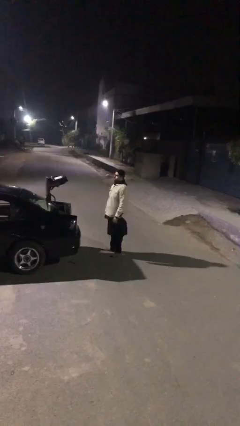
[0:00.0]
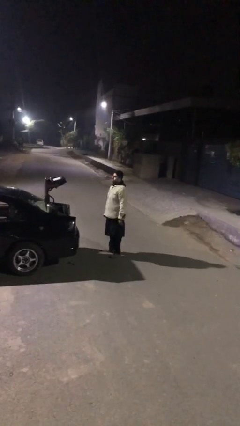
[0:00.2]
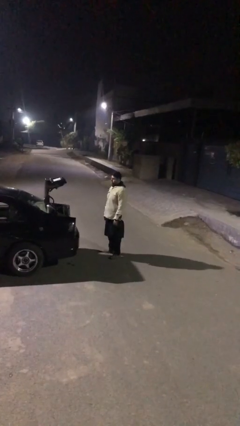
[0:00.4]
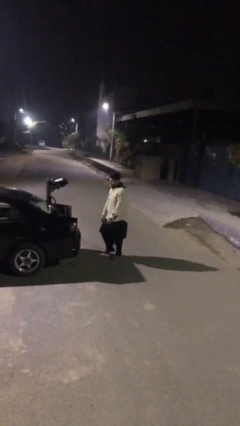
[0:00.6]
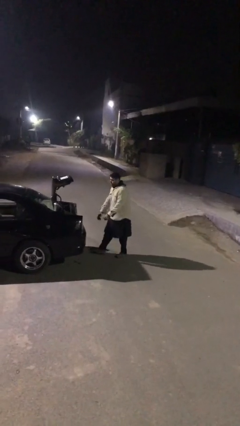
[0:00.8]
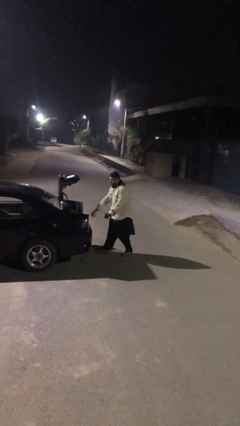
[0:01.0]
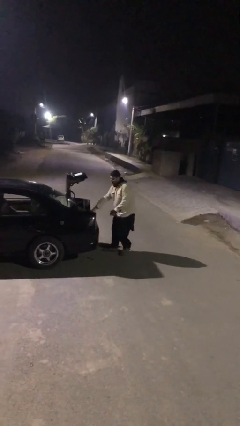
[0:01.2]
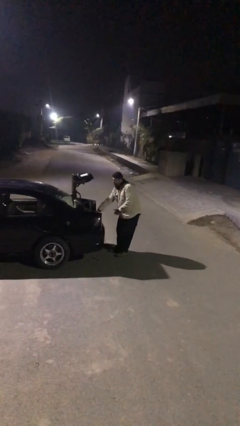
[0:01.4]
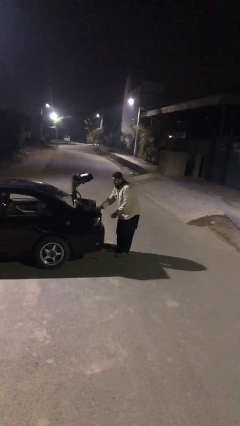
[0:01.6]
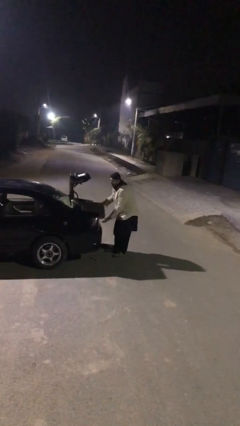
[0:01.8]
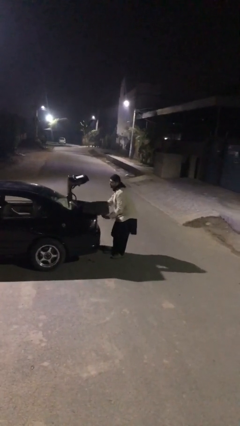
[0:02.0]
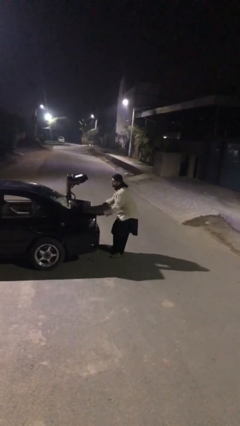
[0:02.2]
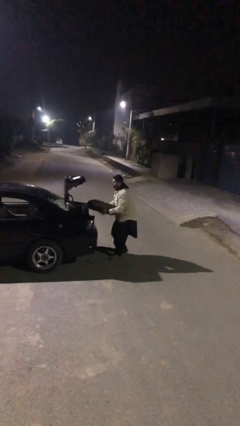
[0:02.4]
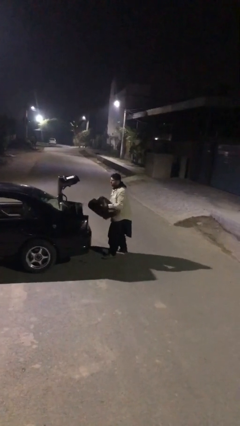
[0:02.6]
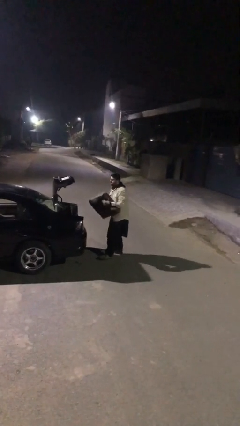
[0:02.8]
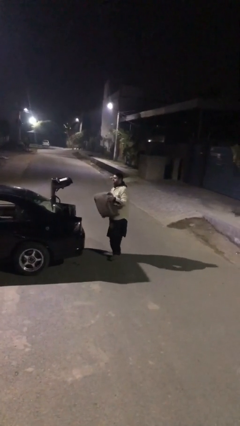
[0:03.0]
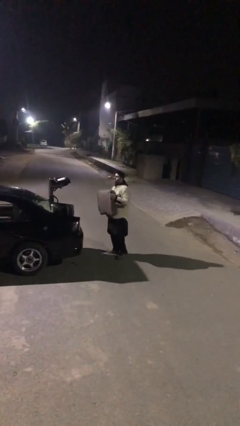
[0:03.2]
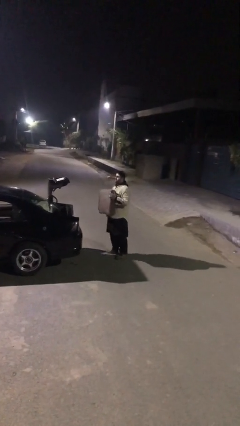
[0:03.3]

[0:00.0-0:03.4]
person unloads car

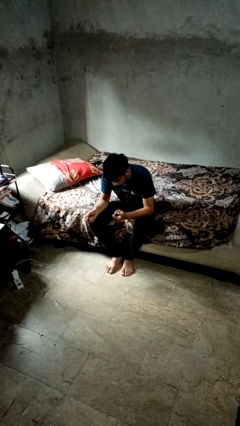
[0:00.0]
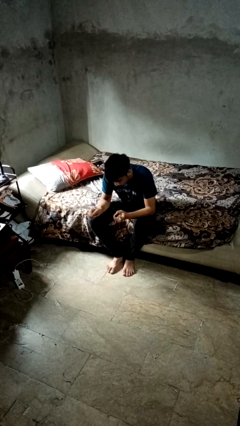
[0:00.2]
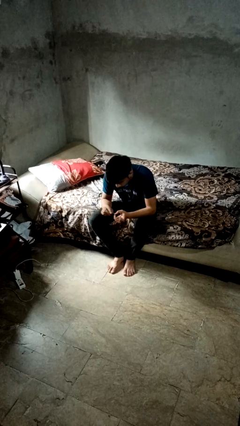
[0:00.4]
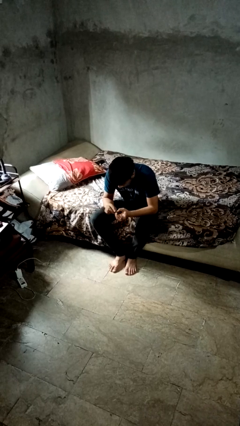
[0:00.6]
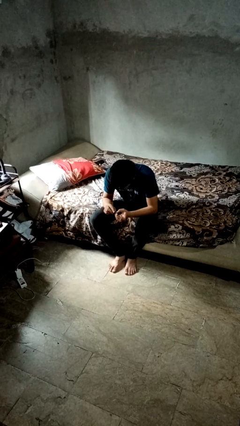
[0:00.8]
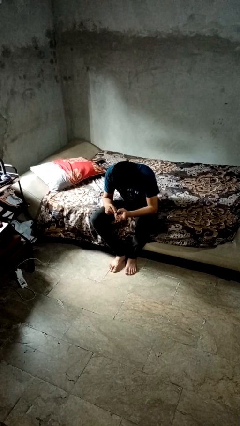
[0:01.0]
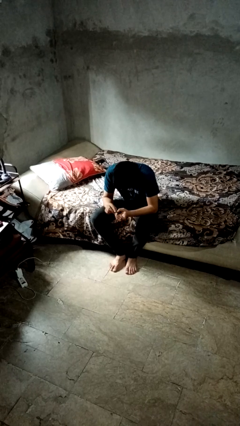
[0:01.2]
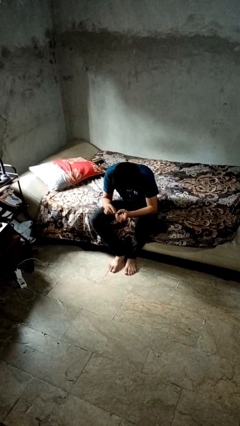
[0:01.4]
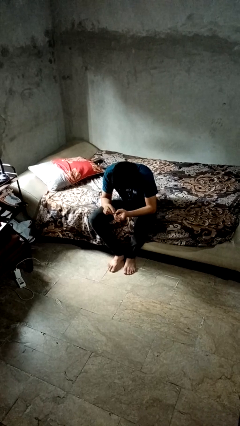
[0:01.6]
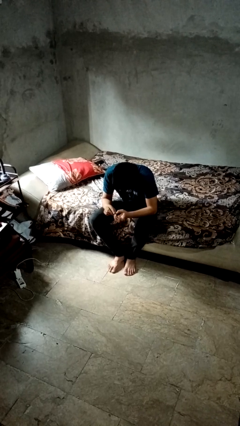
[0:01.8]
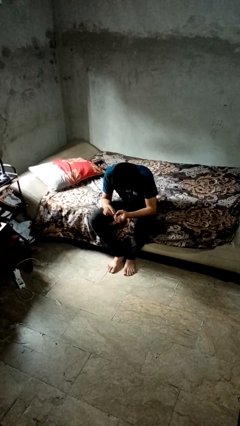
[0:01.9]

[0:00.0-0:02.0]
person files fingernails

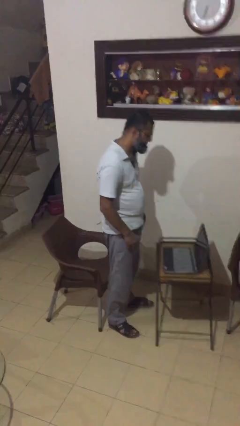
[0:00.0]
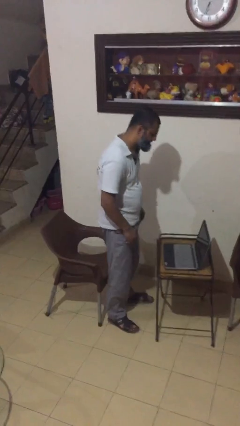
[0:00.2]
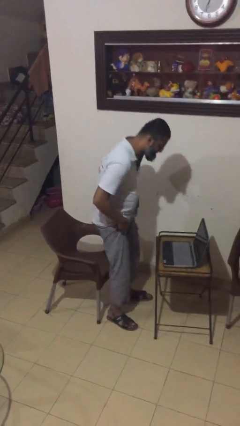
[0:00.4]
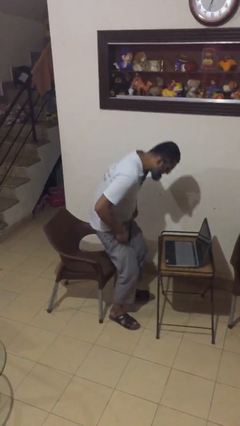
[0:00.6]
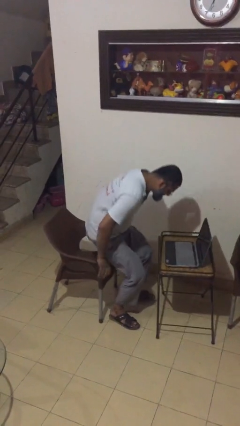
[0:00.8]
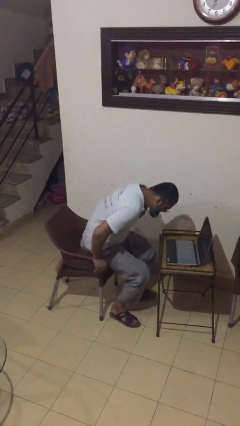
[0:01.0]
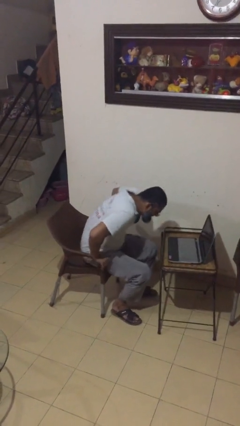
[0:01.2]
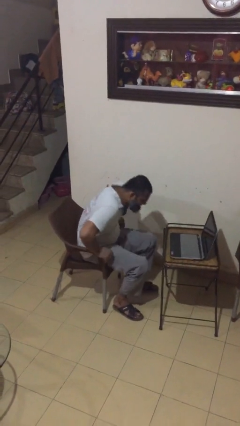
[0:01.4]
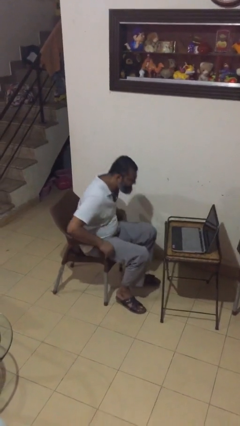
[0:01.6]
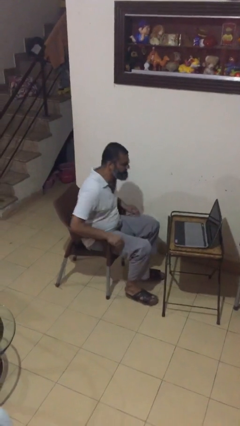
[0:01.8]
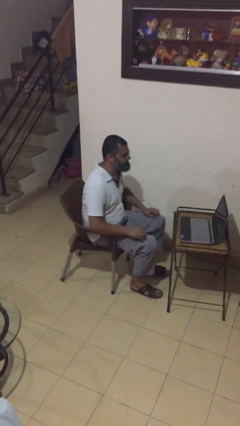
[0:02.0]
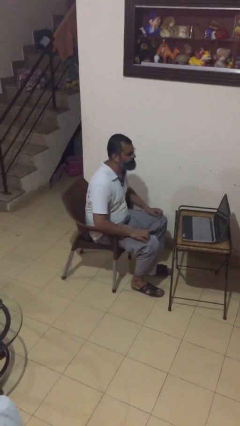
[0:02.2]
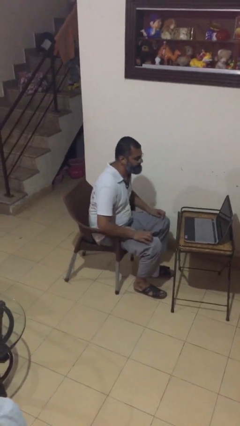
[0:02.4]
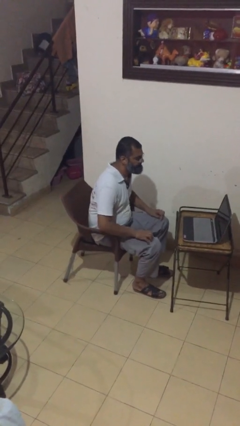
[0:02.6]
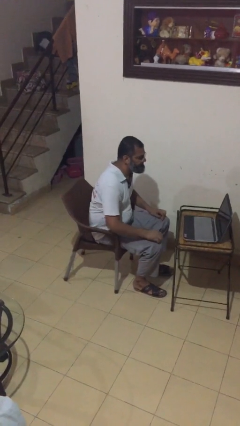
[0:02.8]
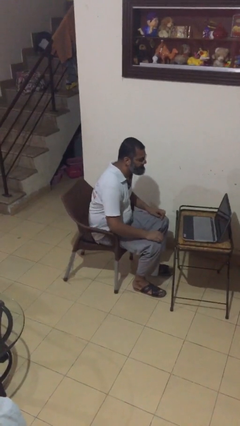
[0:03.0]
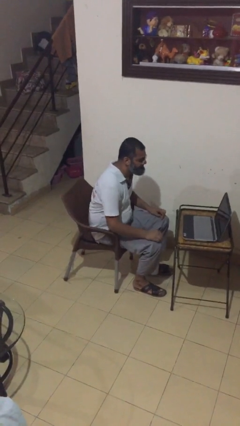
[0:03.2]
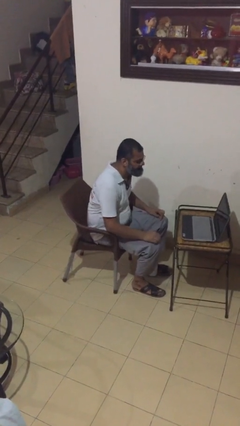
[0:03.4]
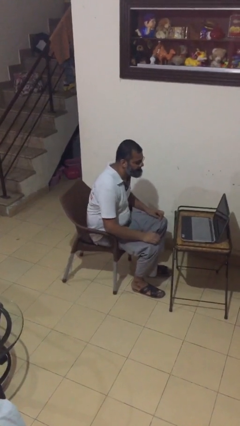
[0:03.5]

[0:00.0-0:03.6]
person sits down

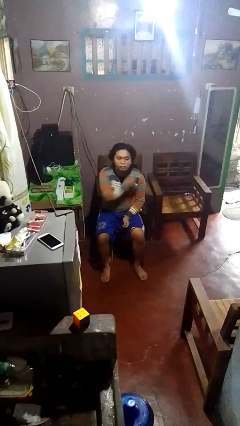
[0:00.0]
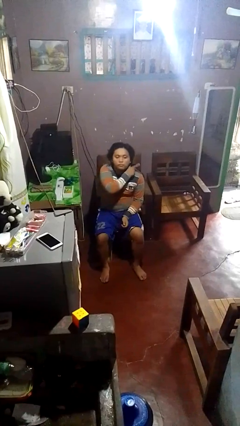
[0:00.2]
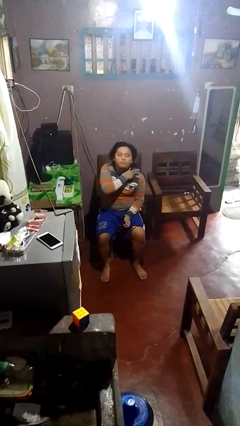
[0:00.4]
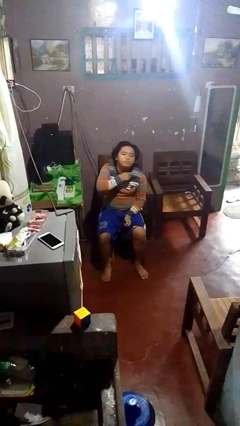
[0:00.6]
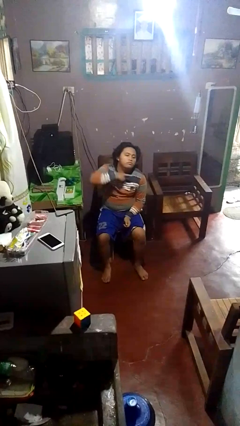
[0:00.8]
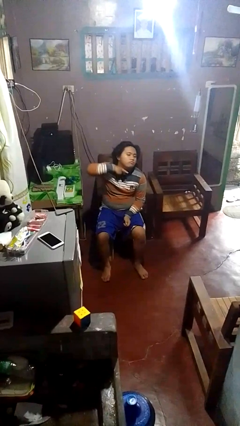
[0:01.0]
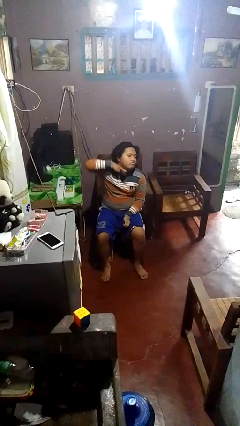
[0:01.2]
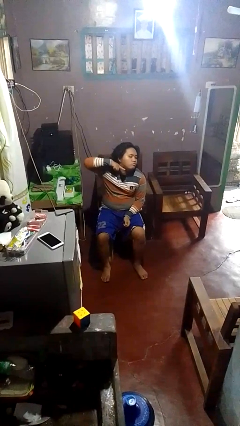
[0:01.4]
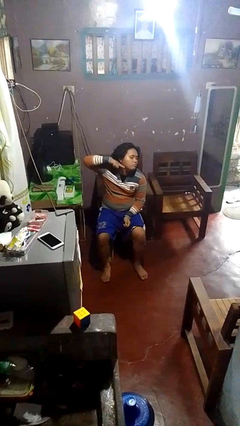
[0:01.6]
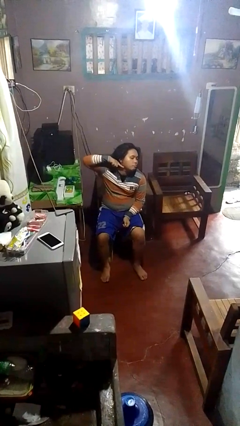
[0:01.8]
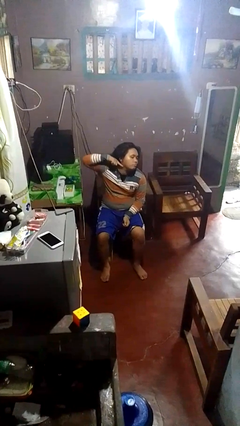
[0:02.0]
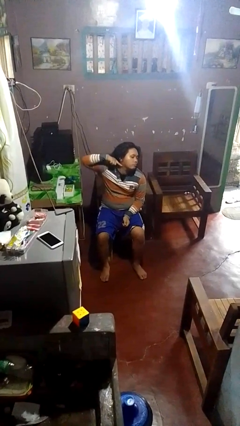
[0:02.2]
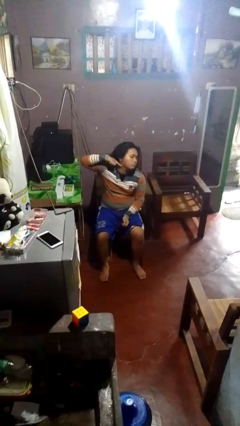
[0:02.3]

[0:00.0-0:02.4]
person gestures cut

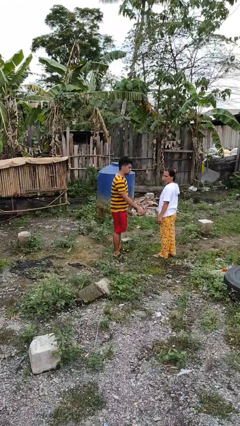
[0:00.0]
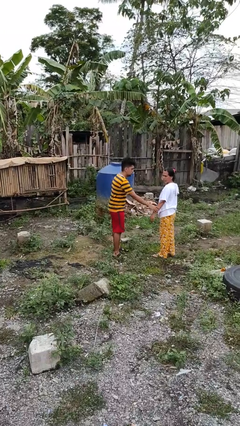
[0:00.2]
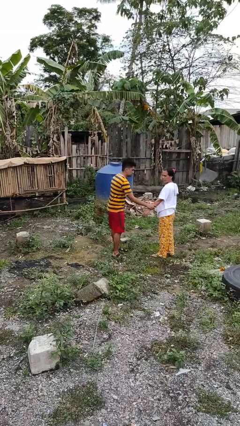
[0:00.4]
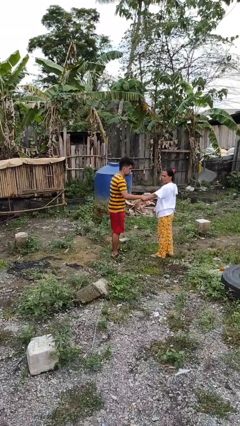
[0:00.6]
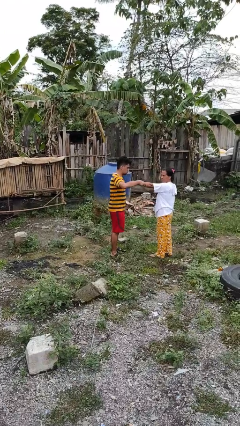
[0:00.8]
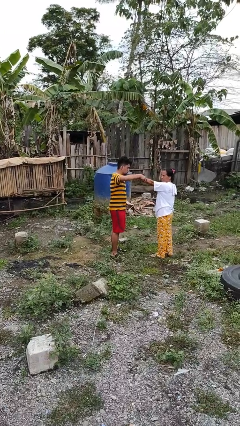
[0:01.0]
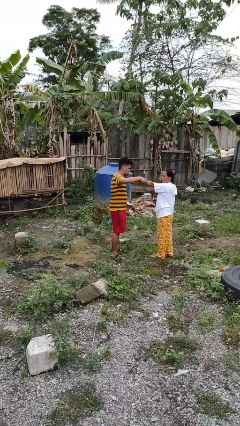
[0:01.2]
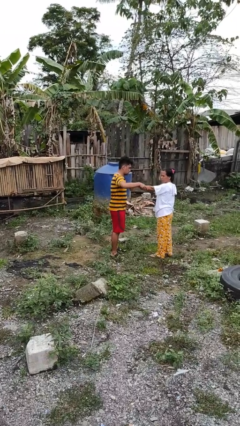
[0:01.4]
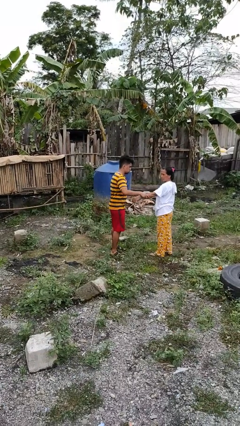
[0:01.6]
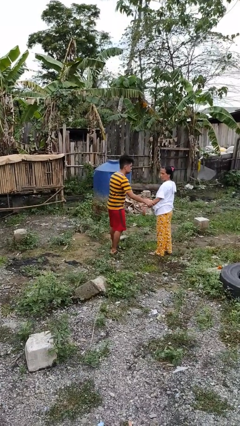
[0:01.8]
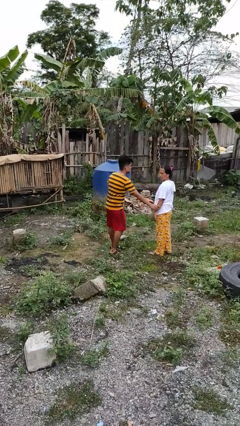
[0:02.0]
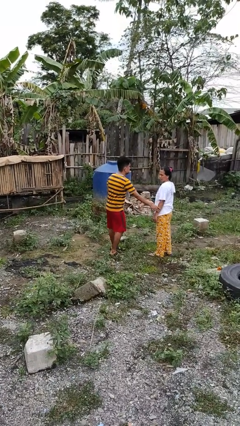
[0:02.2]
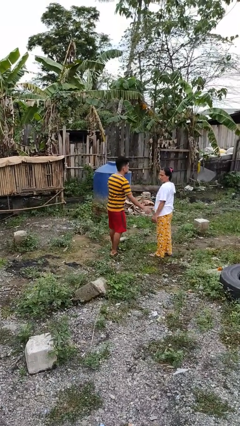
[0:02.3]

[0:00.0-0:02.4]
person grabs person by forearm

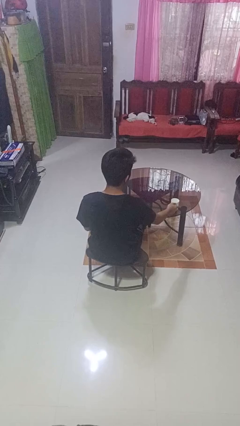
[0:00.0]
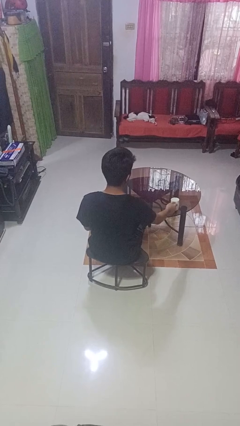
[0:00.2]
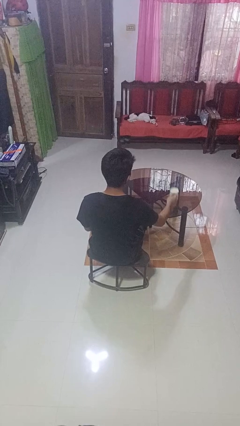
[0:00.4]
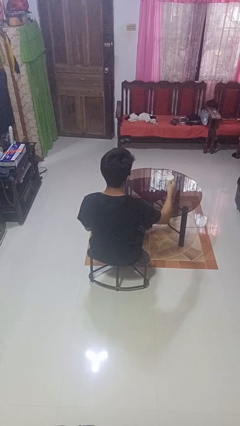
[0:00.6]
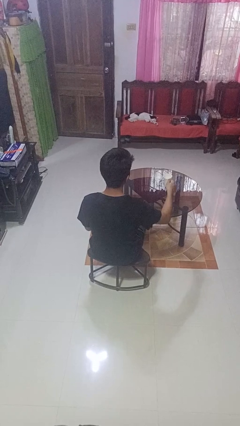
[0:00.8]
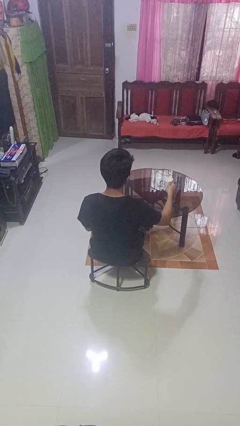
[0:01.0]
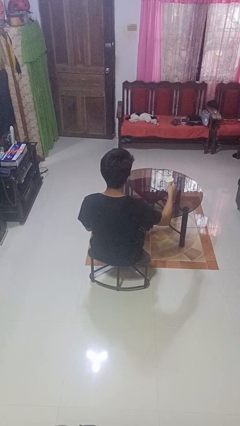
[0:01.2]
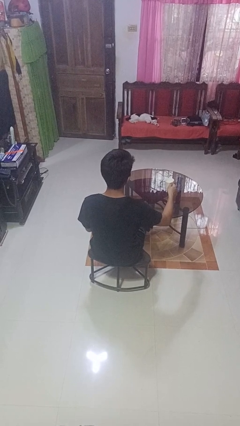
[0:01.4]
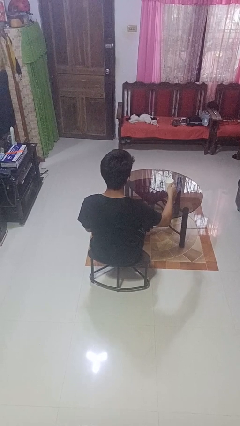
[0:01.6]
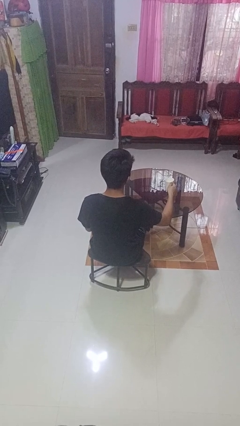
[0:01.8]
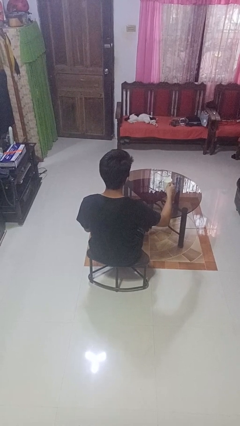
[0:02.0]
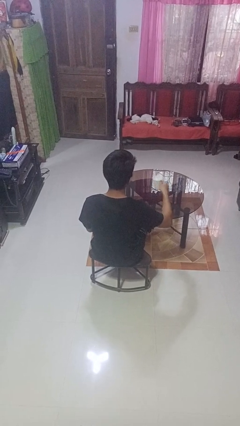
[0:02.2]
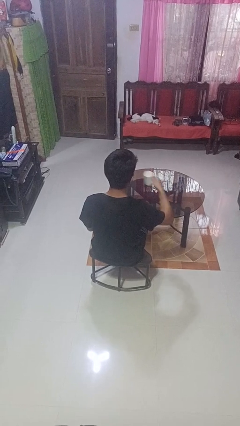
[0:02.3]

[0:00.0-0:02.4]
person picks up object from table

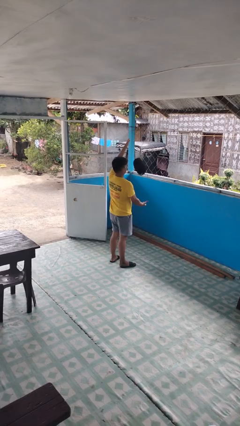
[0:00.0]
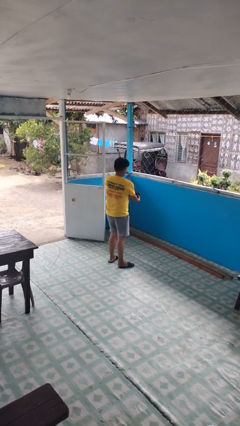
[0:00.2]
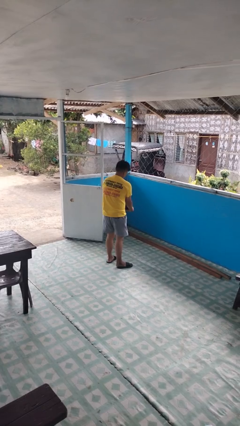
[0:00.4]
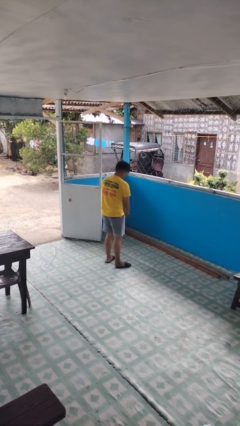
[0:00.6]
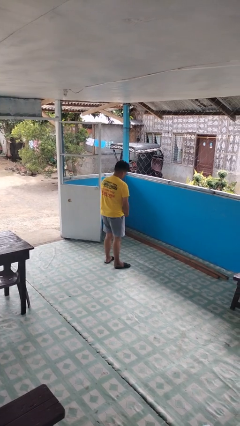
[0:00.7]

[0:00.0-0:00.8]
person catches dropped object

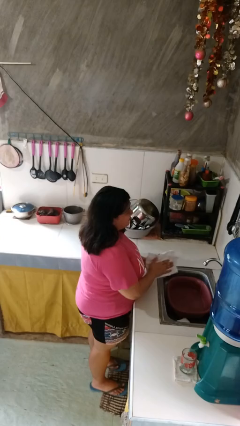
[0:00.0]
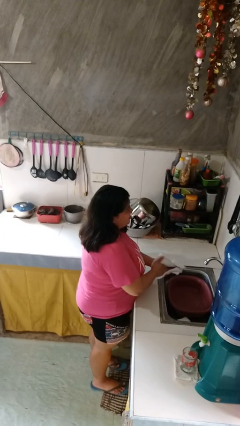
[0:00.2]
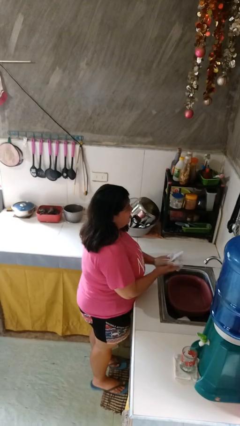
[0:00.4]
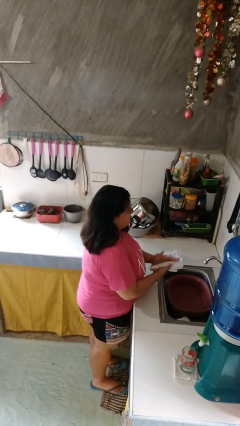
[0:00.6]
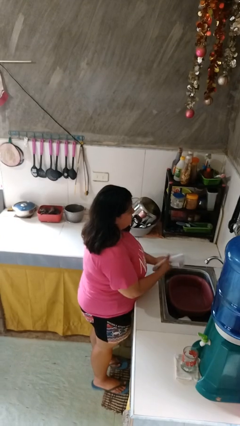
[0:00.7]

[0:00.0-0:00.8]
person dries hands with towel
